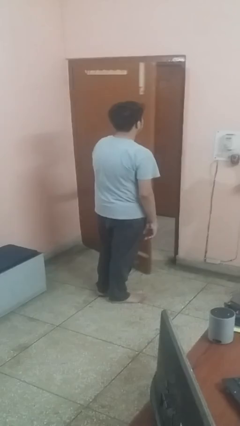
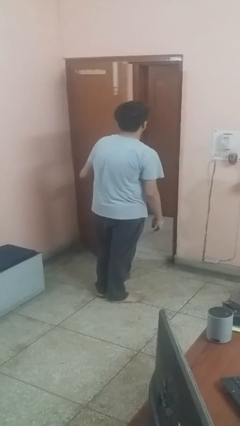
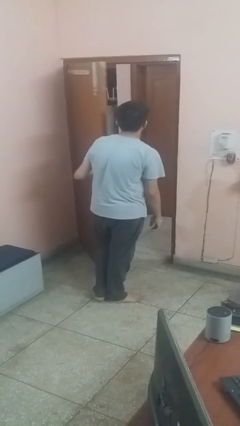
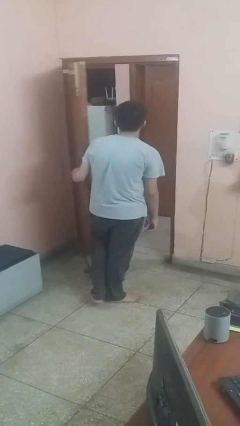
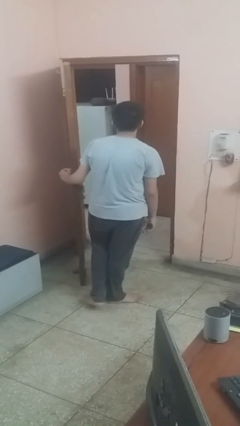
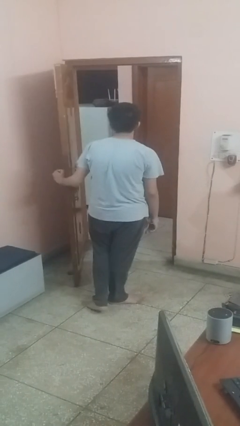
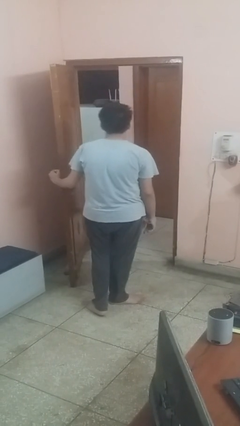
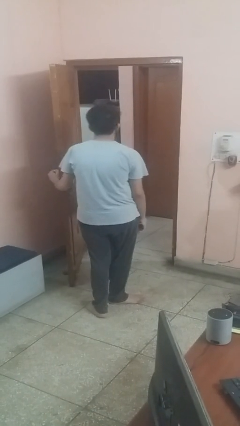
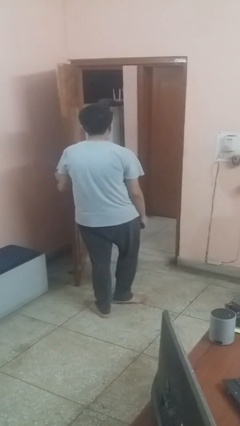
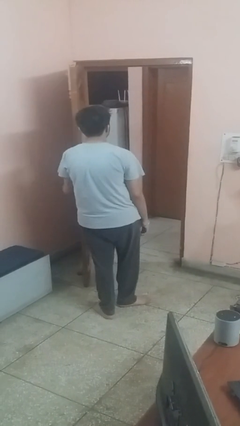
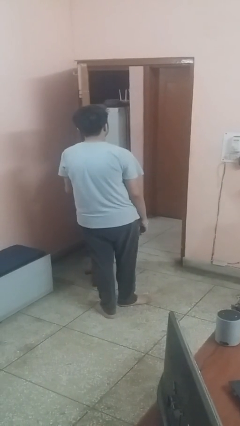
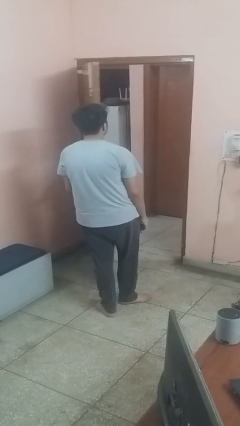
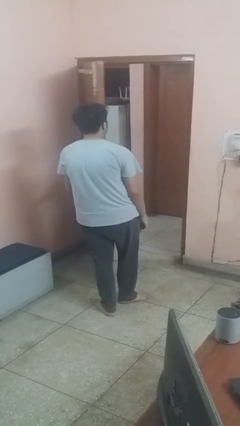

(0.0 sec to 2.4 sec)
person opens facility door

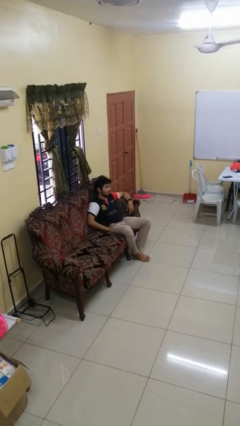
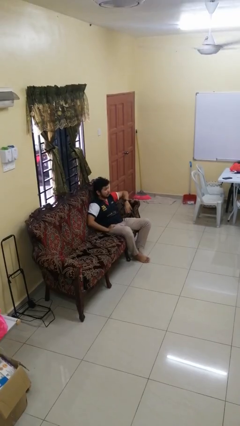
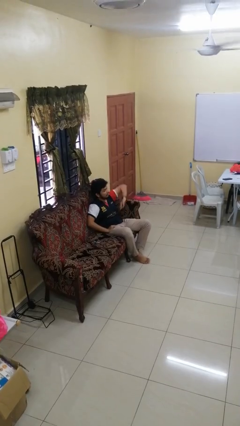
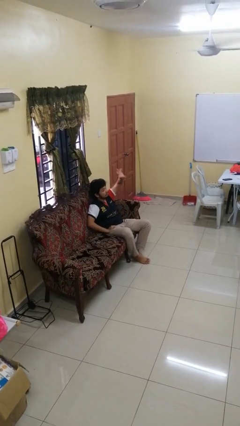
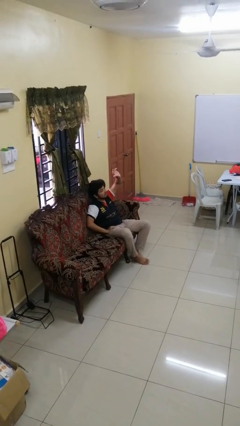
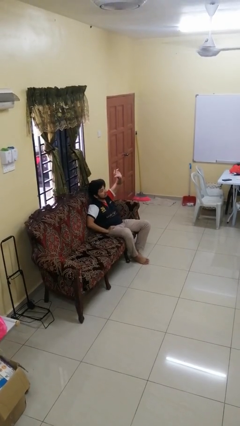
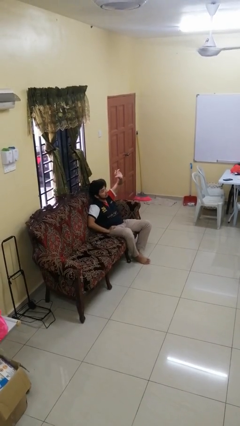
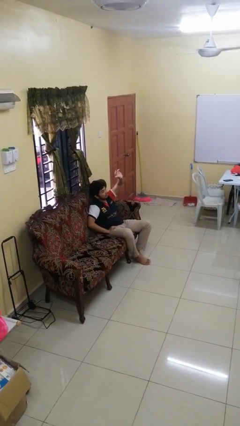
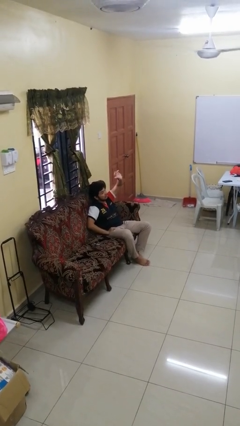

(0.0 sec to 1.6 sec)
person gestures swipe up

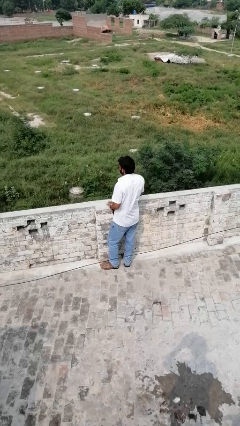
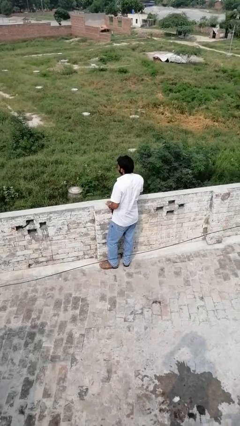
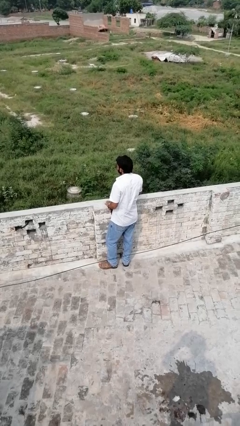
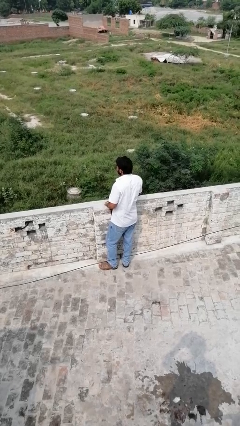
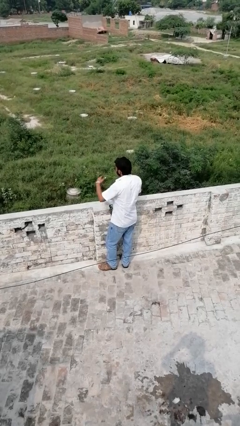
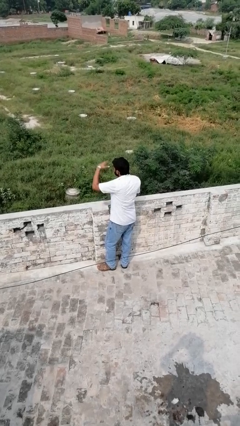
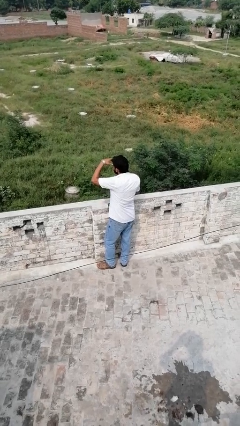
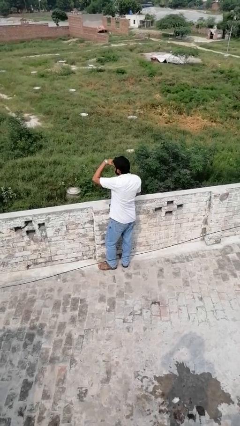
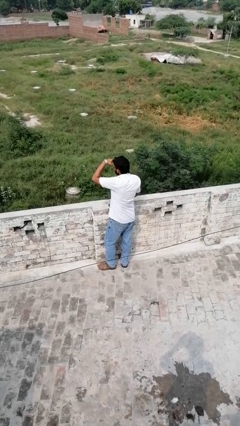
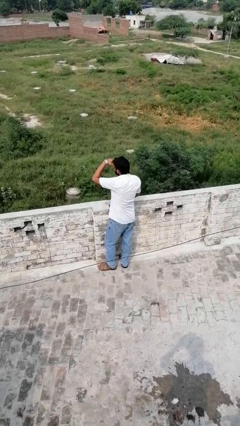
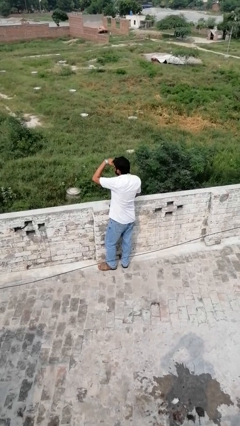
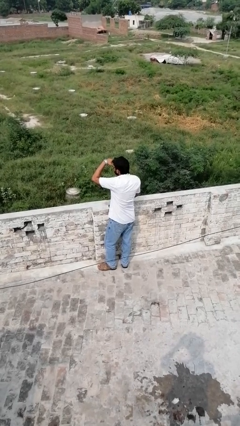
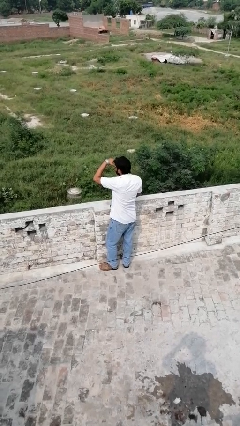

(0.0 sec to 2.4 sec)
person shades eyes

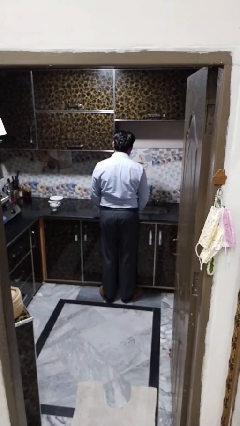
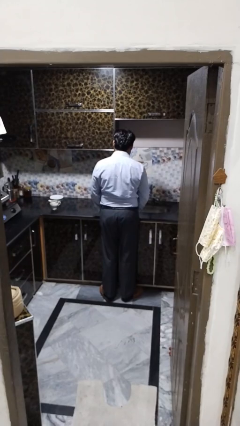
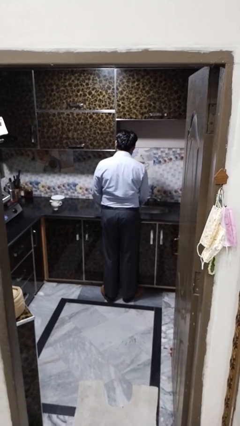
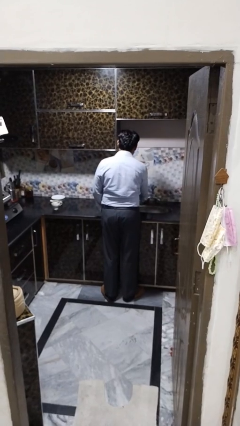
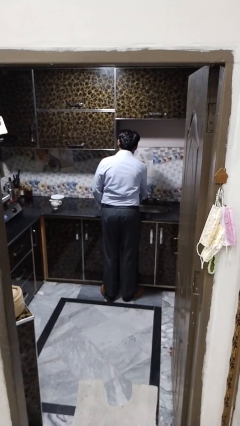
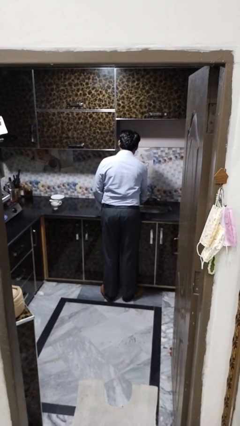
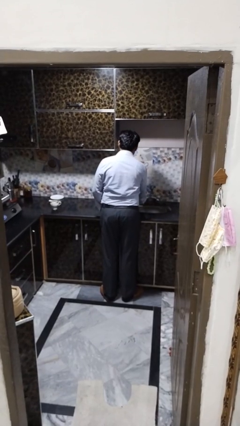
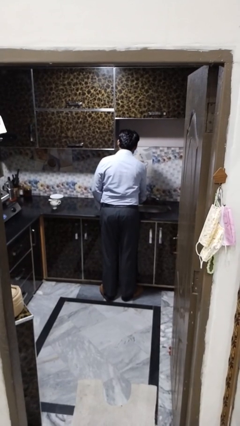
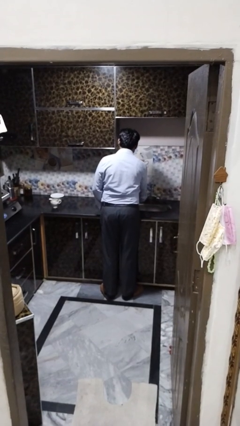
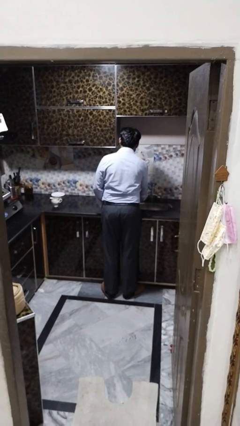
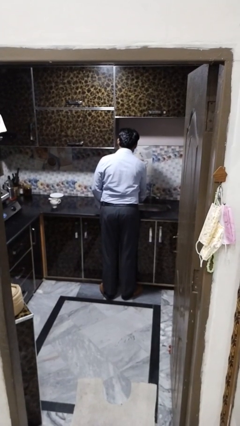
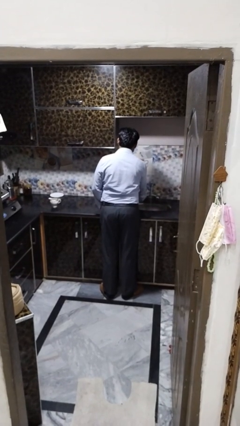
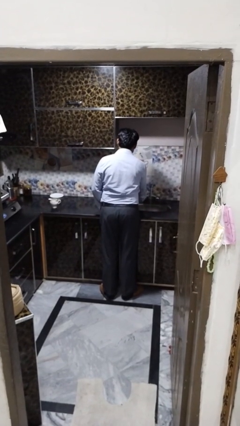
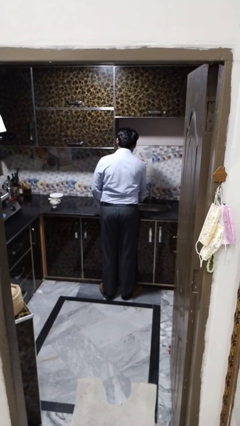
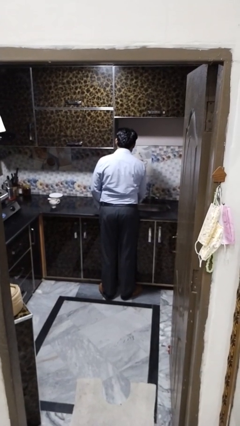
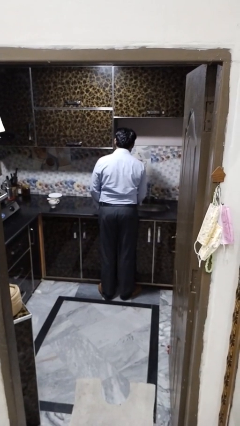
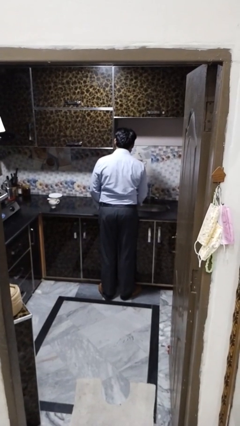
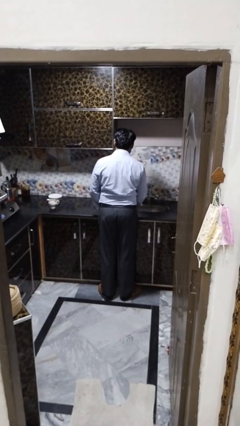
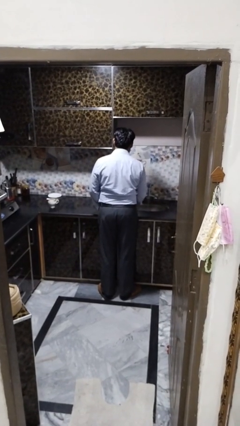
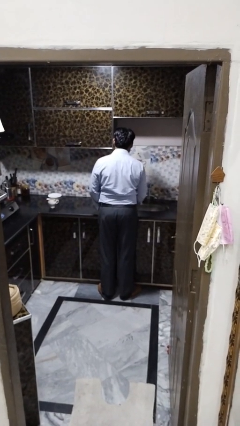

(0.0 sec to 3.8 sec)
person turns on faucet

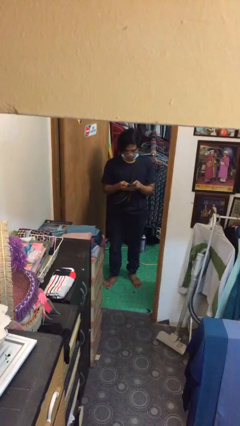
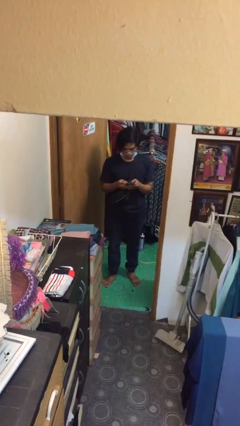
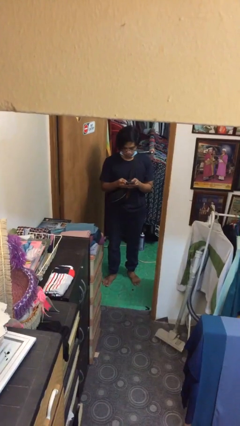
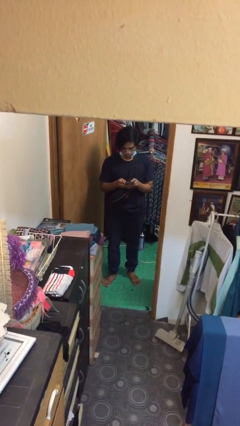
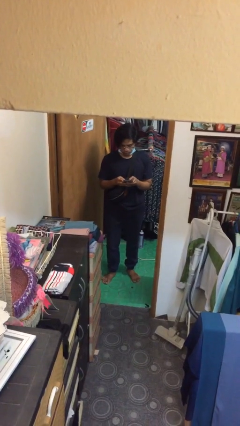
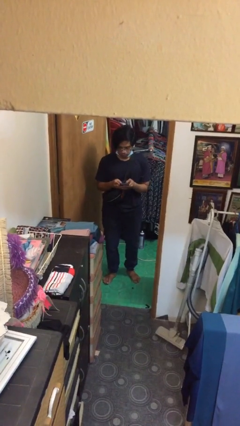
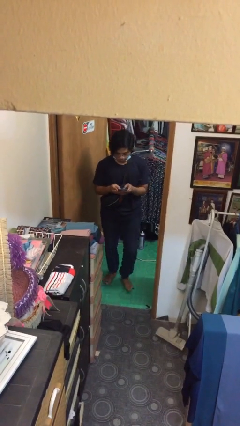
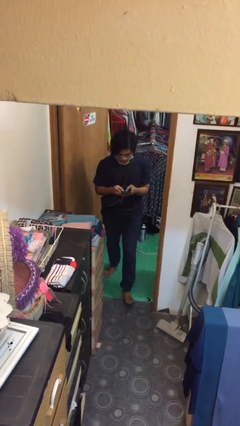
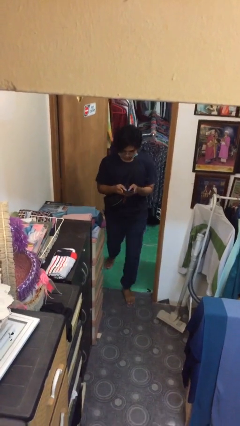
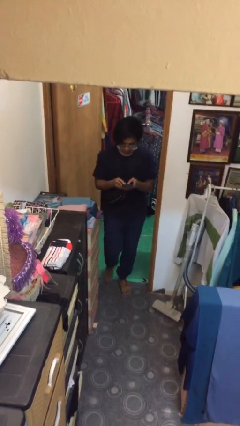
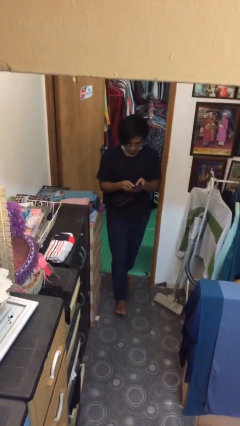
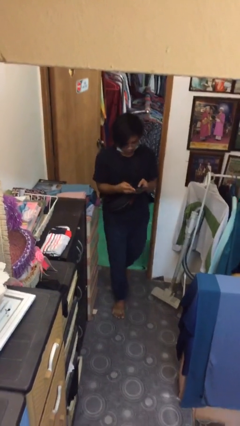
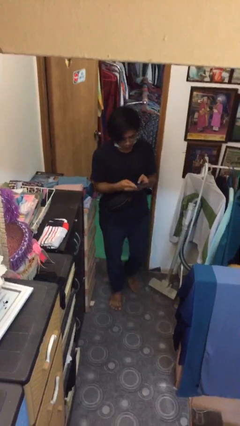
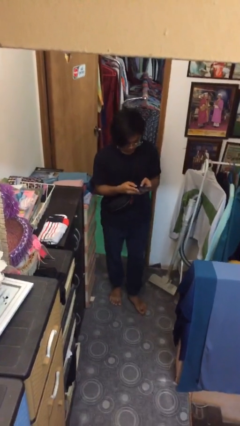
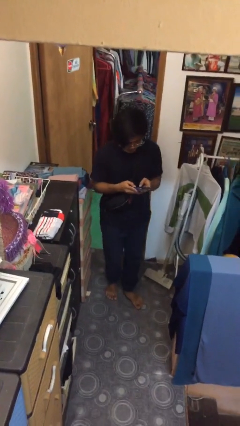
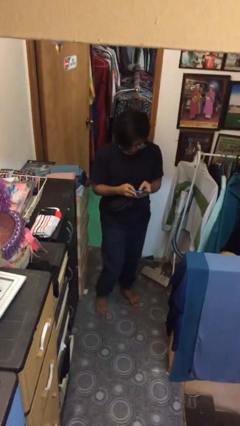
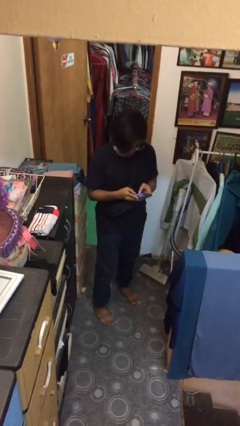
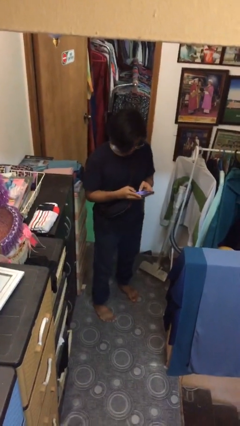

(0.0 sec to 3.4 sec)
person enters scene through structure

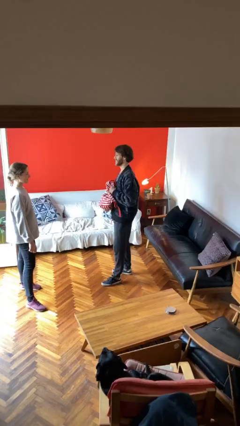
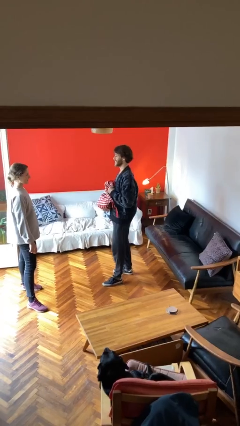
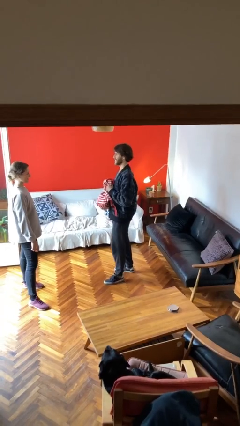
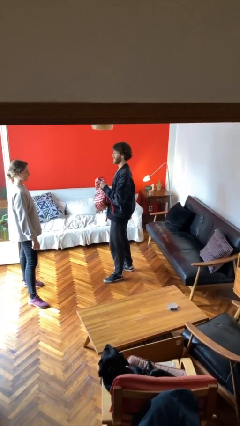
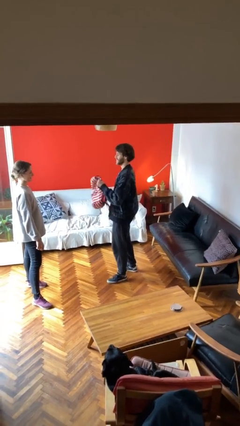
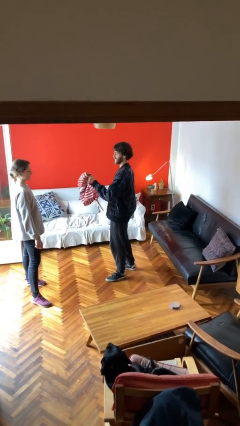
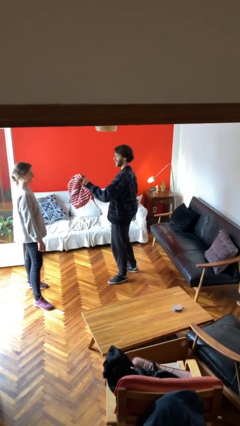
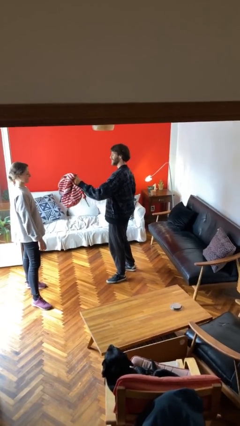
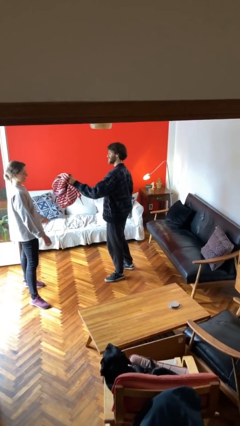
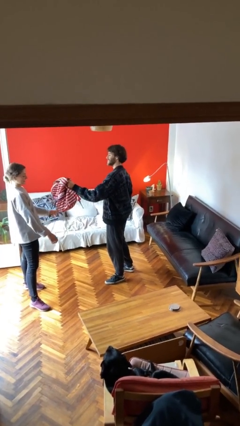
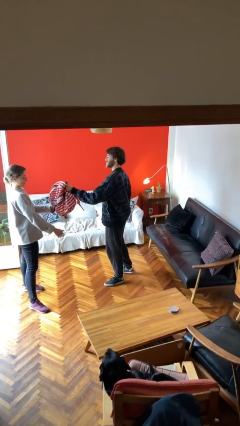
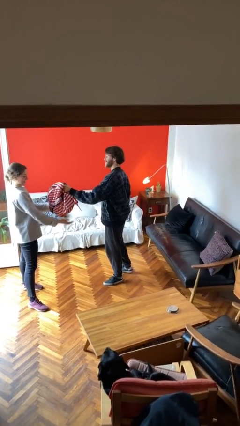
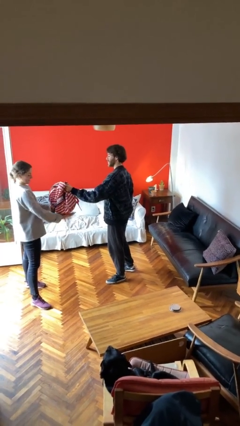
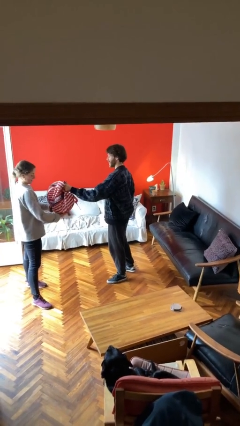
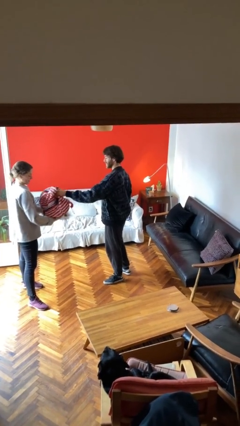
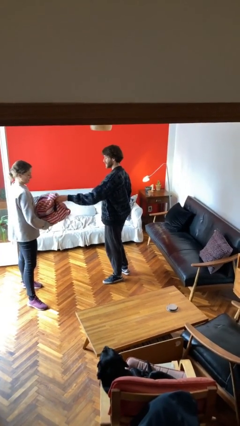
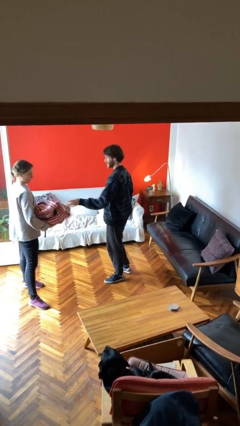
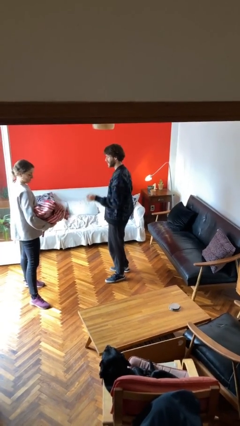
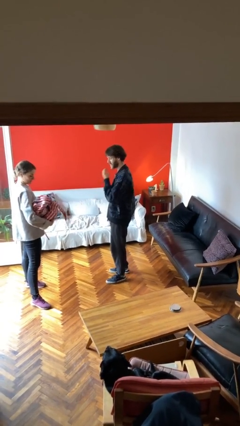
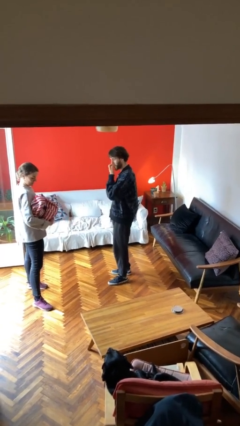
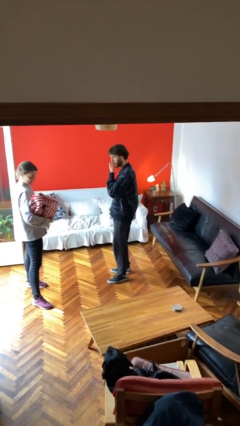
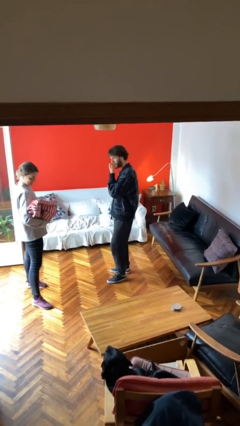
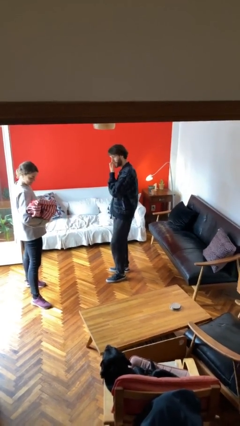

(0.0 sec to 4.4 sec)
person transfers object to person
